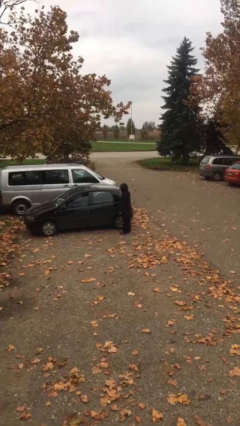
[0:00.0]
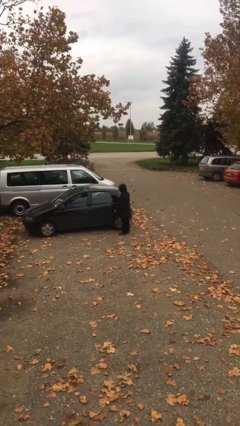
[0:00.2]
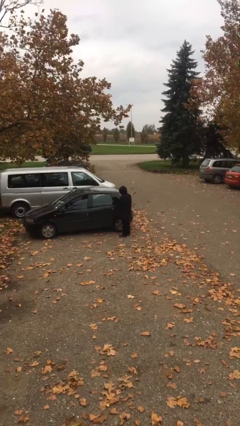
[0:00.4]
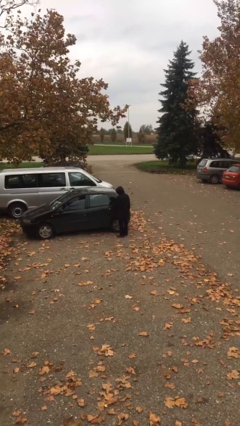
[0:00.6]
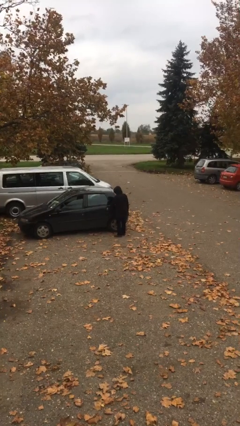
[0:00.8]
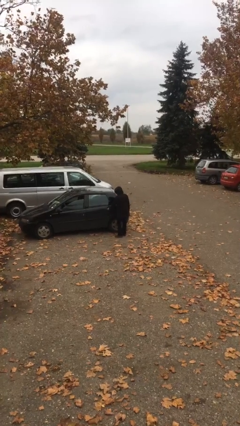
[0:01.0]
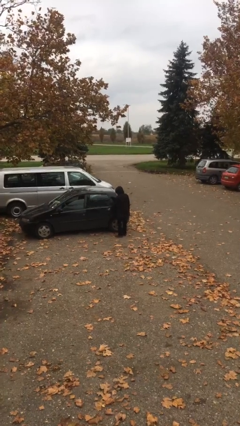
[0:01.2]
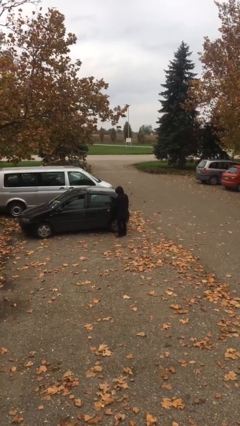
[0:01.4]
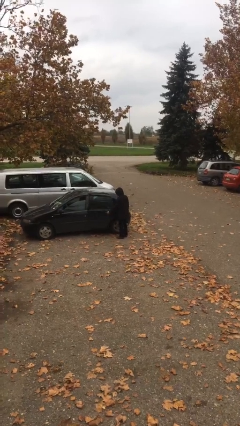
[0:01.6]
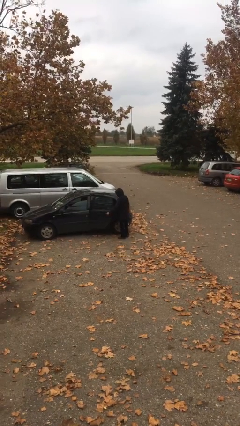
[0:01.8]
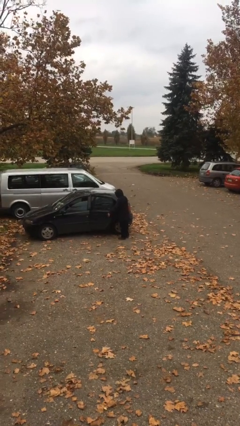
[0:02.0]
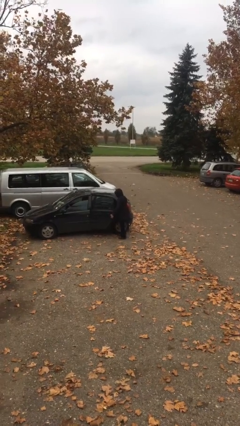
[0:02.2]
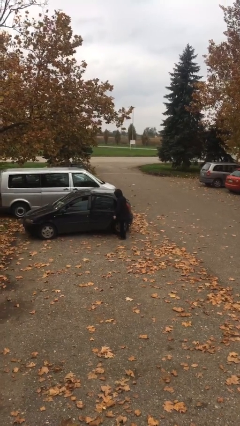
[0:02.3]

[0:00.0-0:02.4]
person opens car door

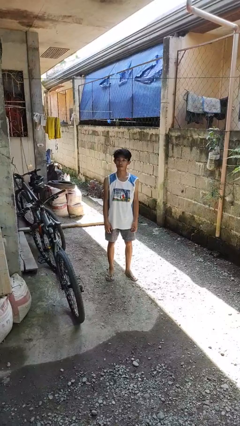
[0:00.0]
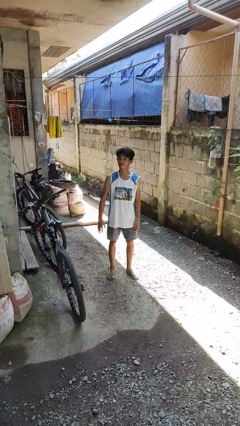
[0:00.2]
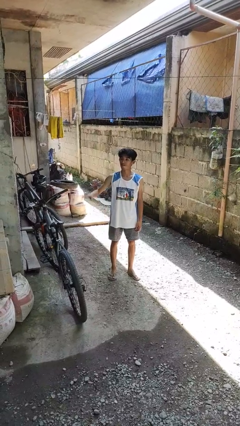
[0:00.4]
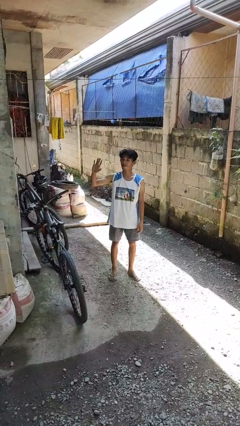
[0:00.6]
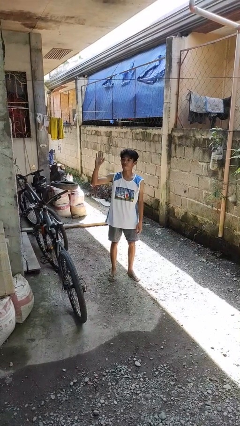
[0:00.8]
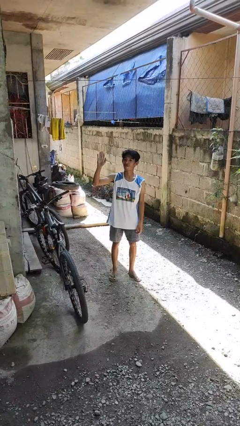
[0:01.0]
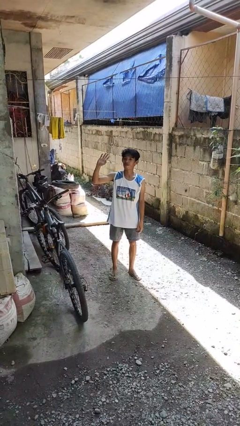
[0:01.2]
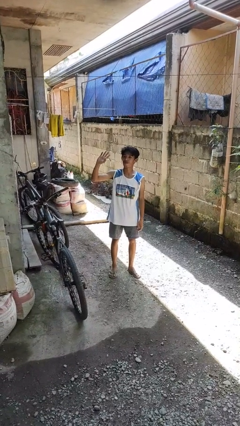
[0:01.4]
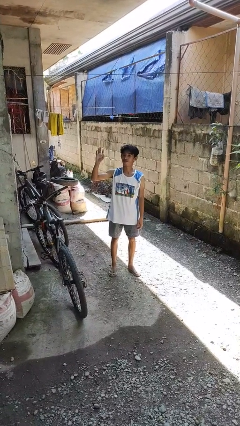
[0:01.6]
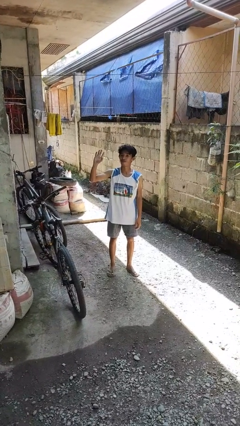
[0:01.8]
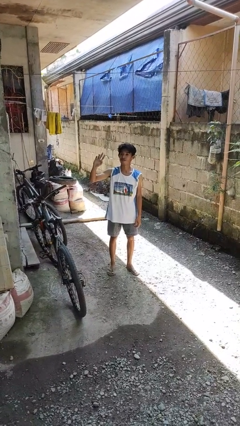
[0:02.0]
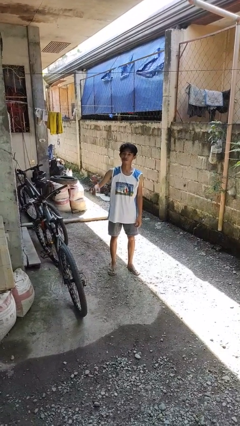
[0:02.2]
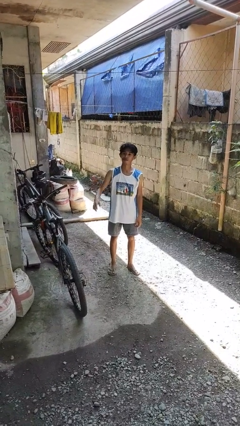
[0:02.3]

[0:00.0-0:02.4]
person waves at person

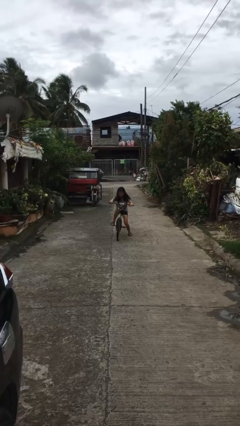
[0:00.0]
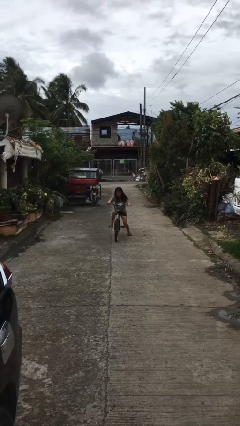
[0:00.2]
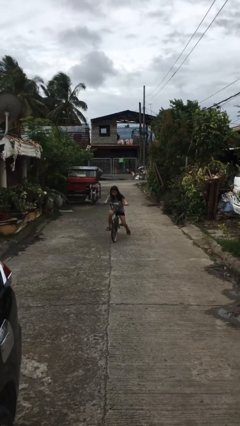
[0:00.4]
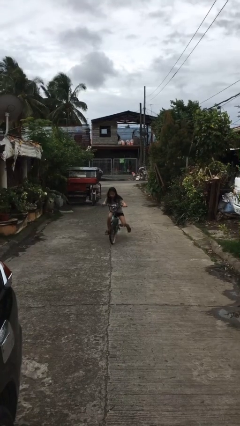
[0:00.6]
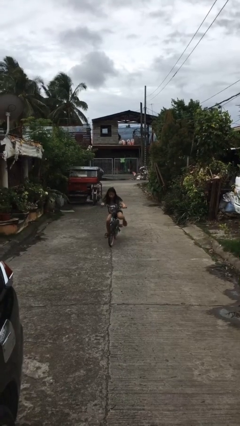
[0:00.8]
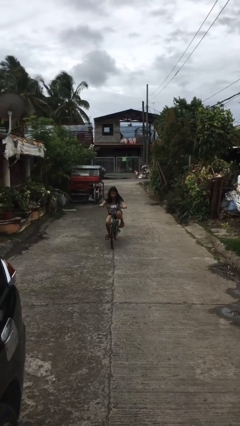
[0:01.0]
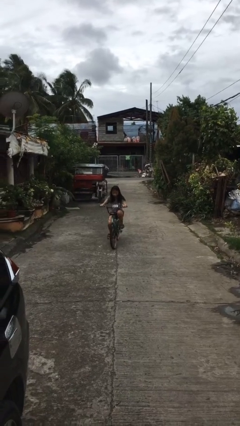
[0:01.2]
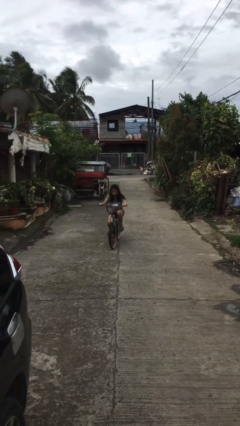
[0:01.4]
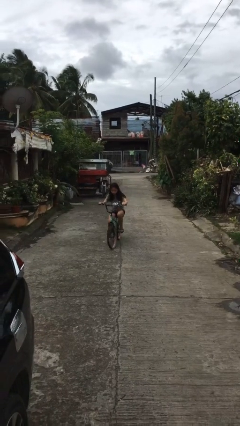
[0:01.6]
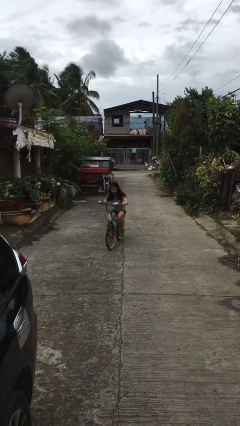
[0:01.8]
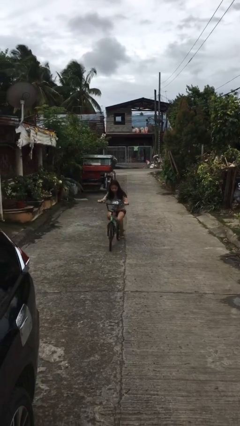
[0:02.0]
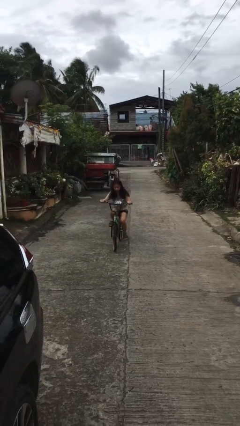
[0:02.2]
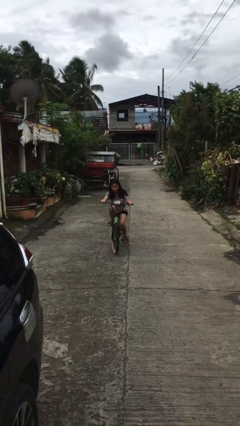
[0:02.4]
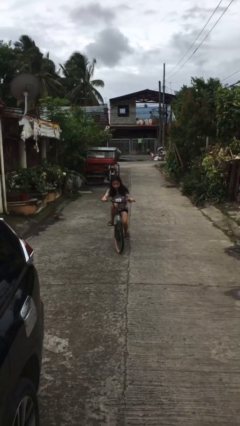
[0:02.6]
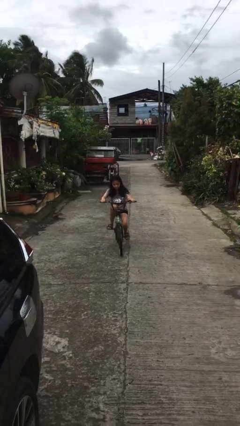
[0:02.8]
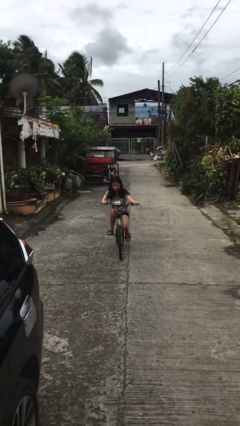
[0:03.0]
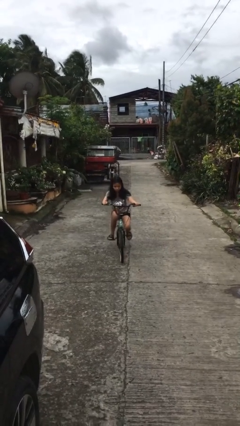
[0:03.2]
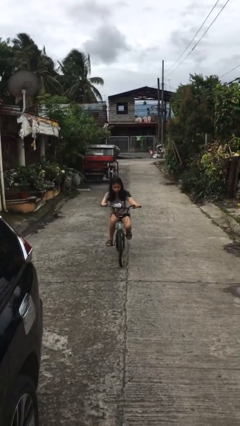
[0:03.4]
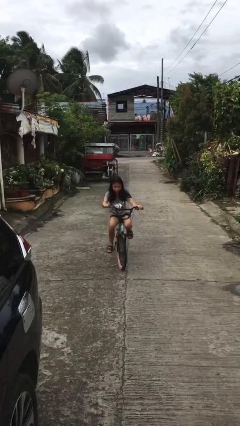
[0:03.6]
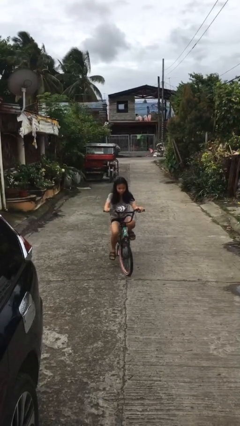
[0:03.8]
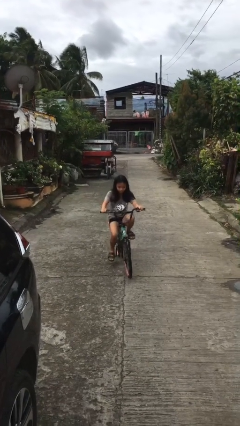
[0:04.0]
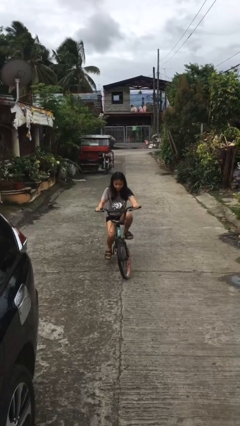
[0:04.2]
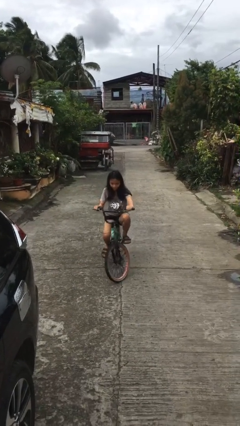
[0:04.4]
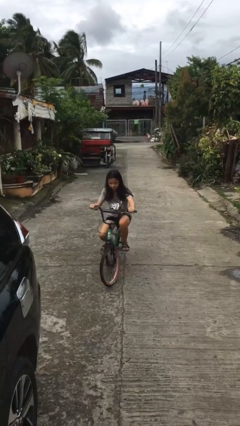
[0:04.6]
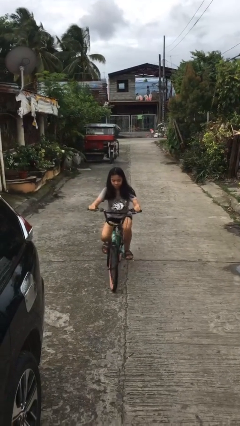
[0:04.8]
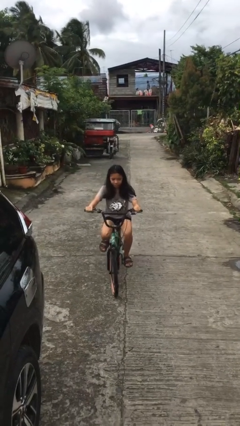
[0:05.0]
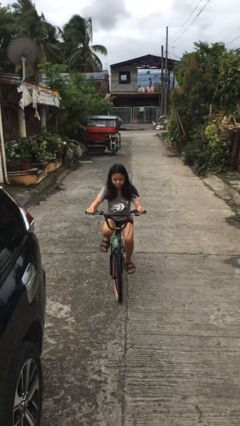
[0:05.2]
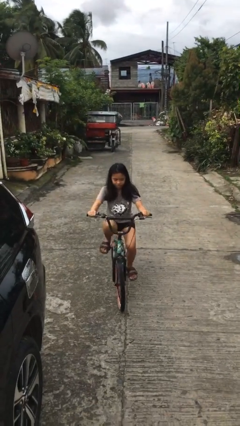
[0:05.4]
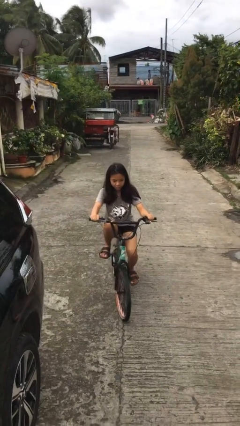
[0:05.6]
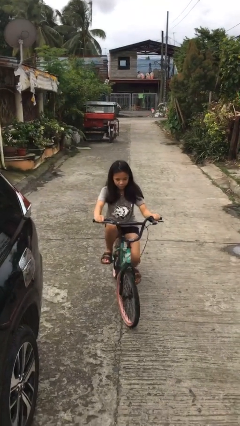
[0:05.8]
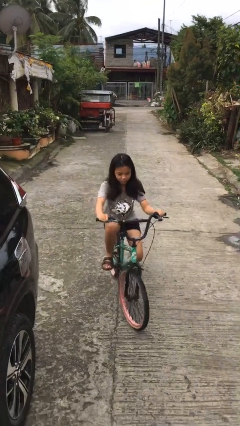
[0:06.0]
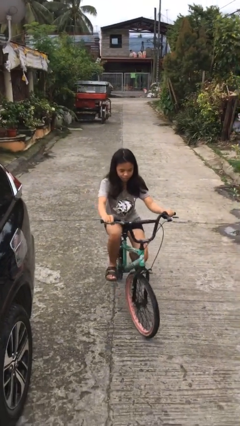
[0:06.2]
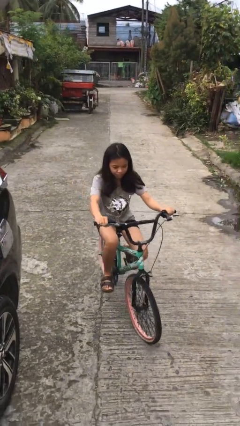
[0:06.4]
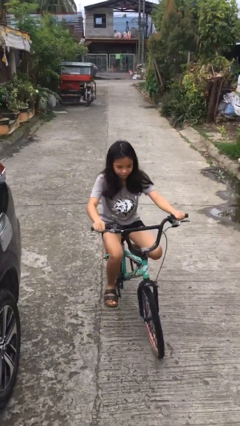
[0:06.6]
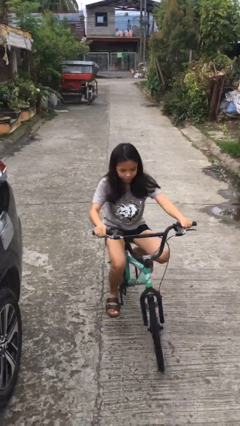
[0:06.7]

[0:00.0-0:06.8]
person rides bicycle

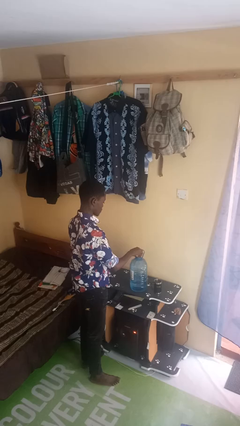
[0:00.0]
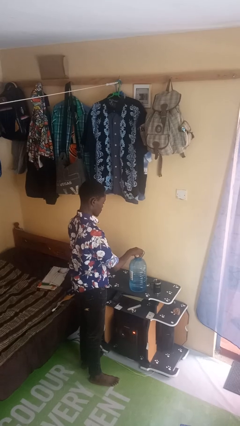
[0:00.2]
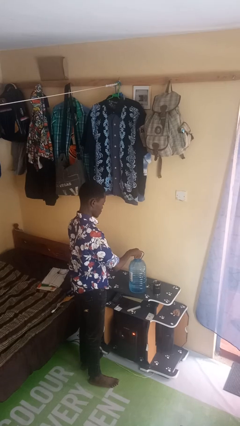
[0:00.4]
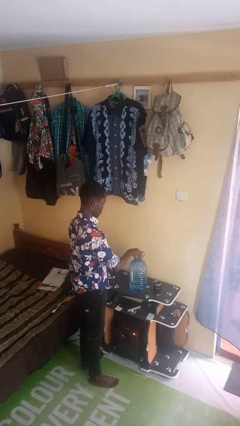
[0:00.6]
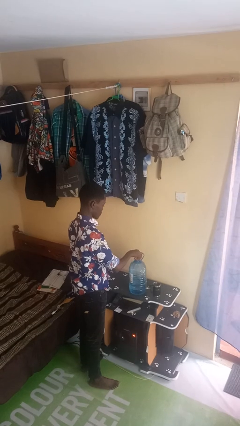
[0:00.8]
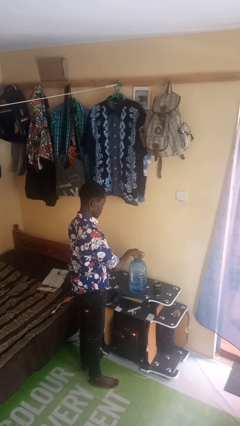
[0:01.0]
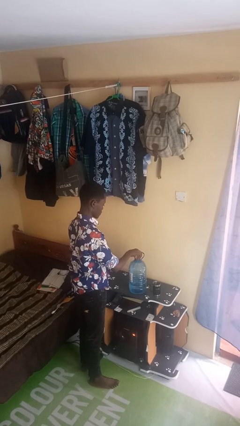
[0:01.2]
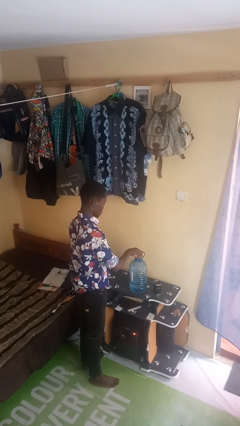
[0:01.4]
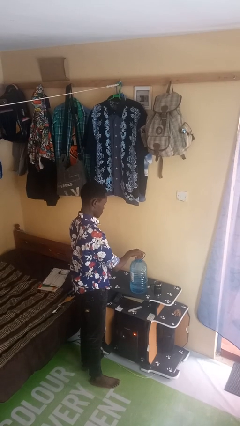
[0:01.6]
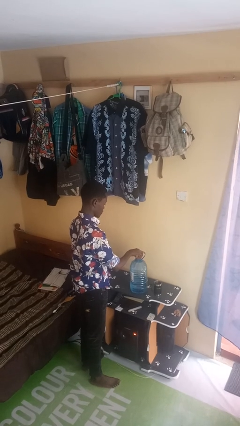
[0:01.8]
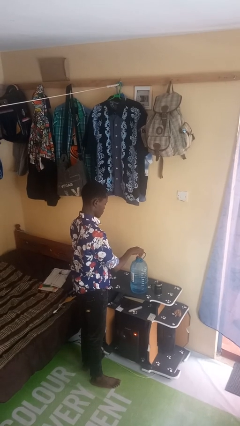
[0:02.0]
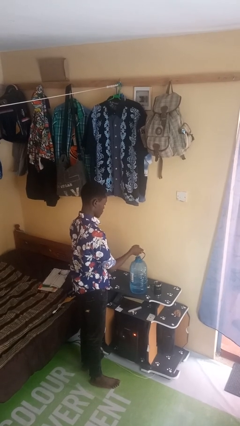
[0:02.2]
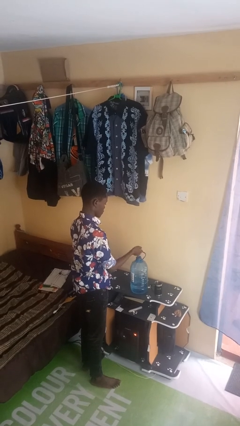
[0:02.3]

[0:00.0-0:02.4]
person unscrews lid from bottle

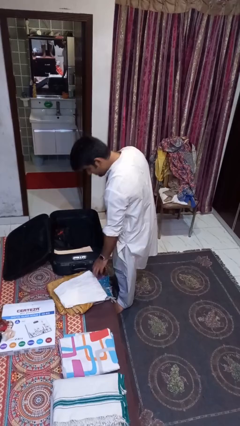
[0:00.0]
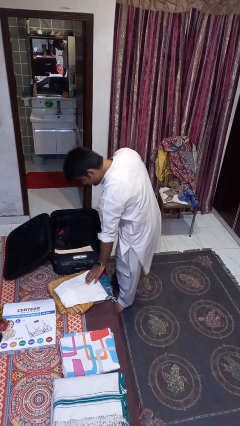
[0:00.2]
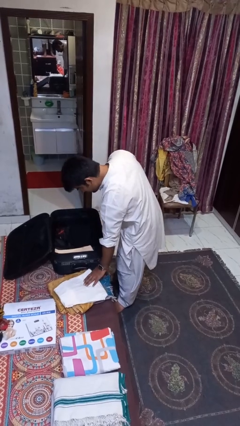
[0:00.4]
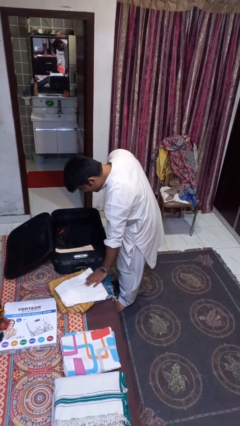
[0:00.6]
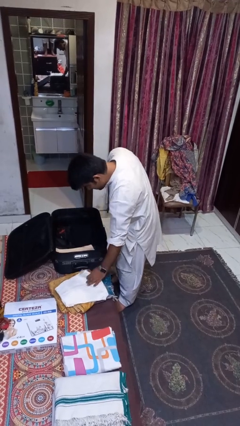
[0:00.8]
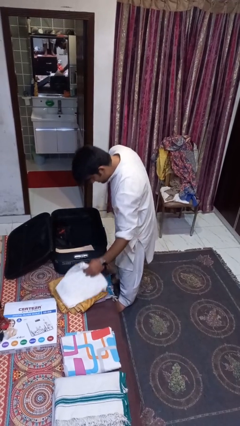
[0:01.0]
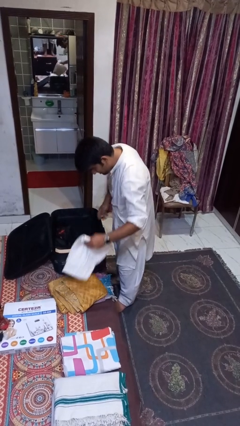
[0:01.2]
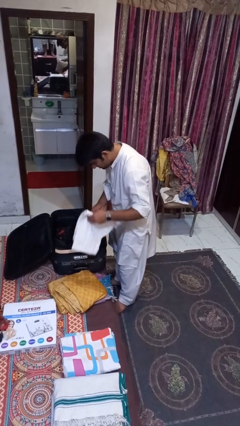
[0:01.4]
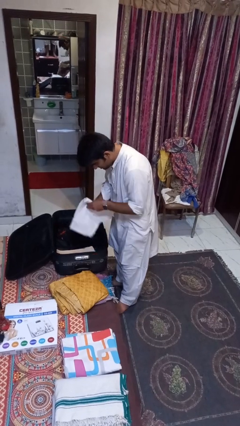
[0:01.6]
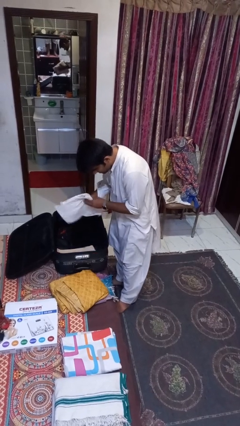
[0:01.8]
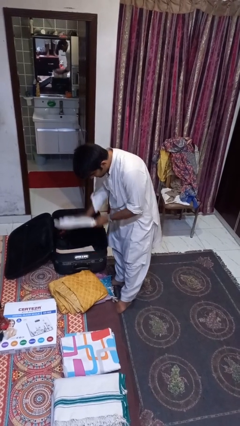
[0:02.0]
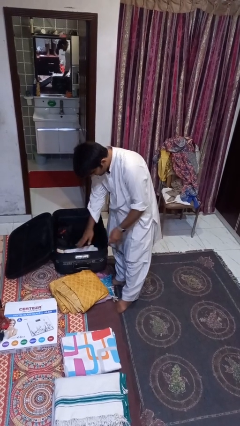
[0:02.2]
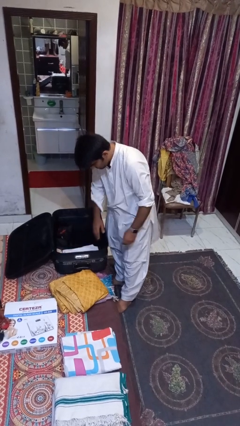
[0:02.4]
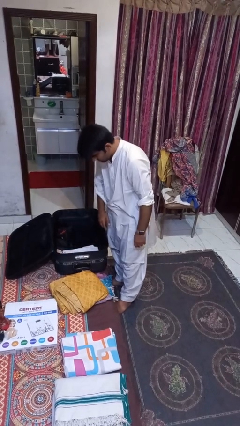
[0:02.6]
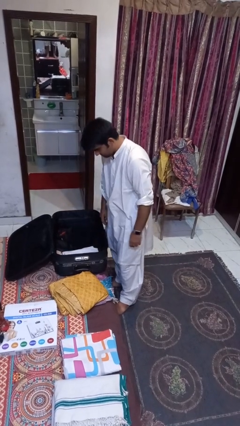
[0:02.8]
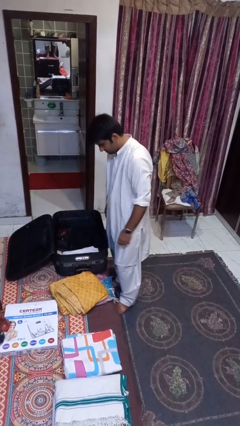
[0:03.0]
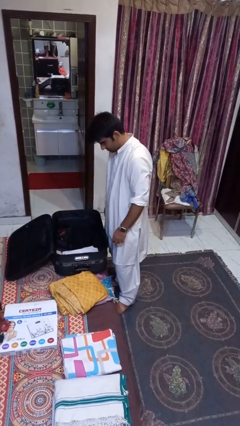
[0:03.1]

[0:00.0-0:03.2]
person loads clothes into suitcase

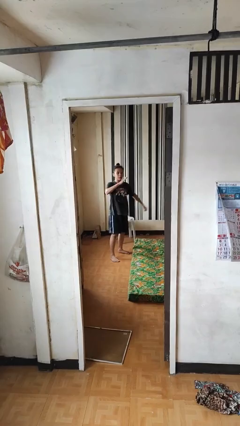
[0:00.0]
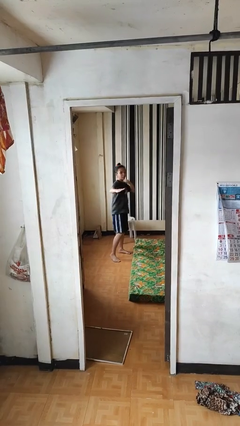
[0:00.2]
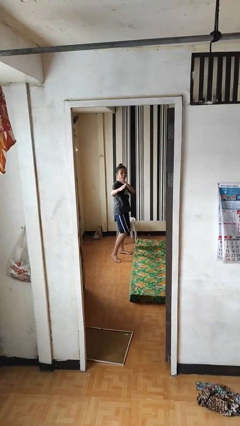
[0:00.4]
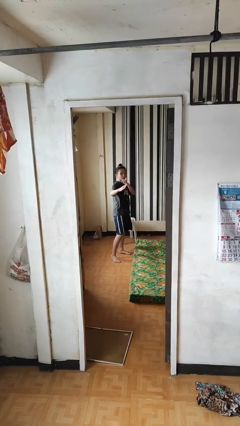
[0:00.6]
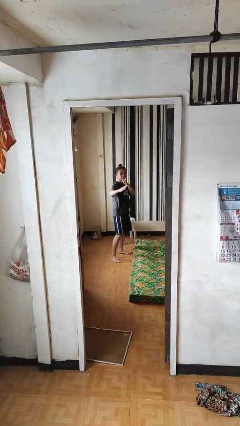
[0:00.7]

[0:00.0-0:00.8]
person karate chop
